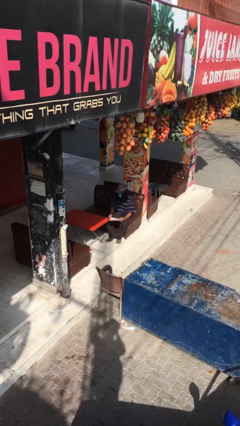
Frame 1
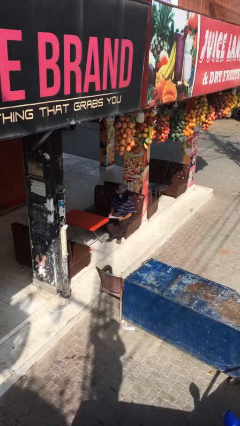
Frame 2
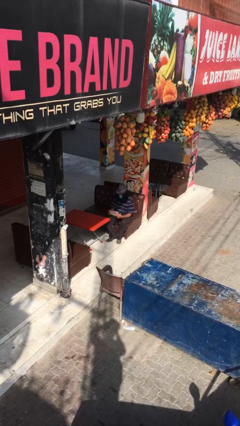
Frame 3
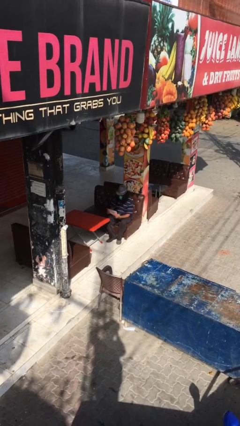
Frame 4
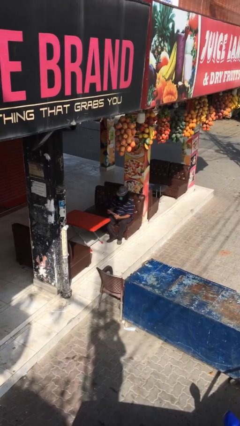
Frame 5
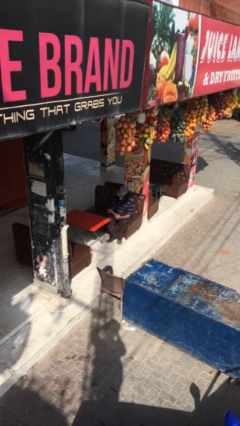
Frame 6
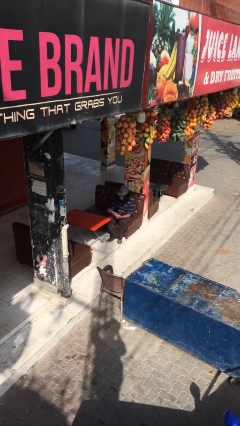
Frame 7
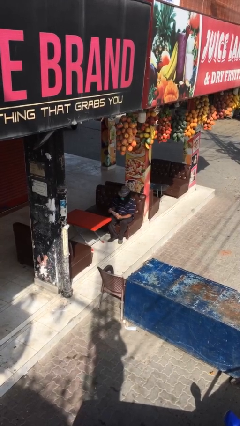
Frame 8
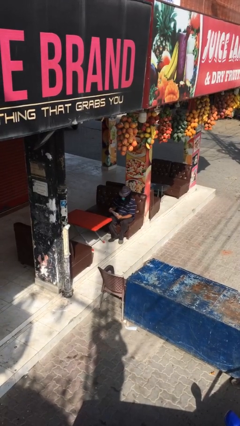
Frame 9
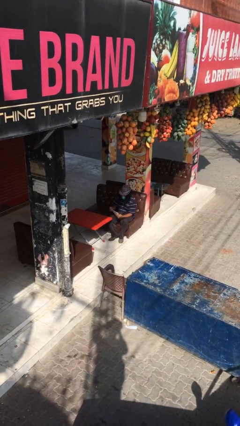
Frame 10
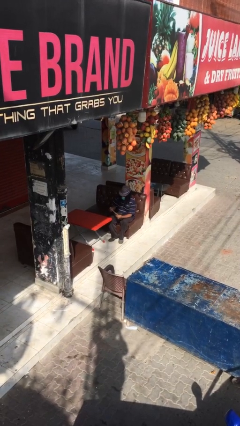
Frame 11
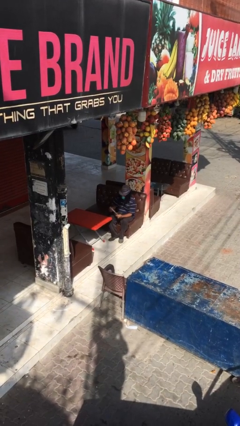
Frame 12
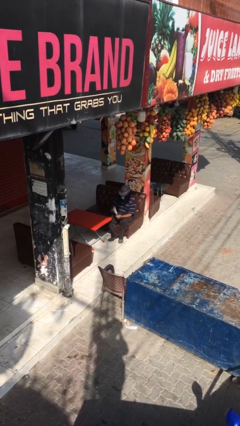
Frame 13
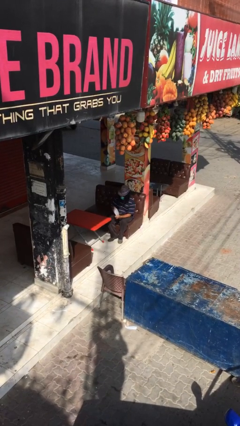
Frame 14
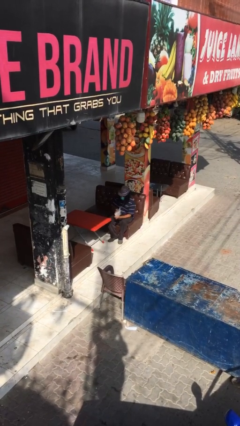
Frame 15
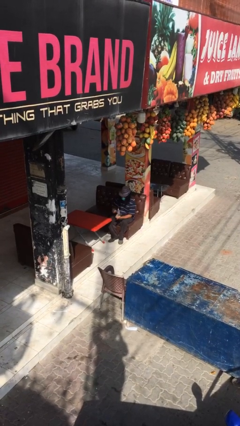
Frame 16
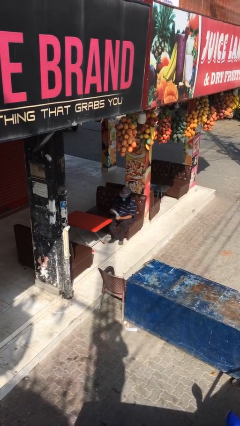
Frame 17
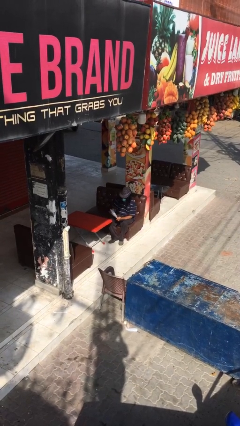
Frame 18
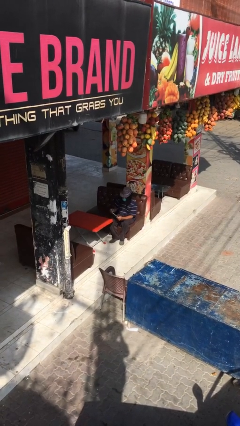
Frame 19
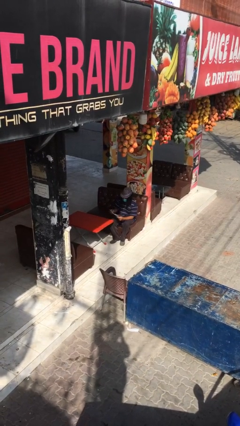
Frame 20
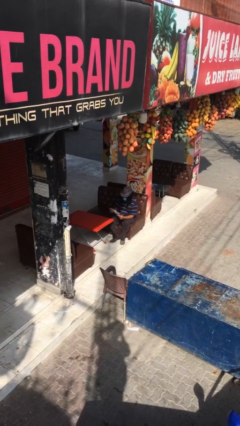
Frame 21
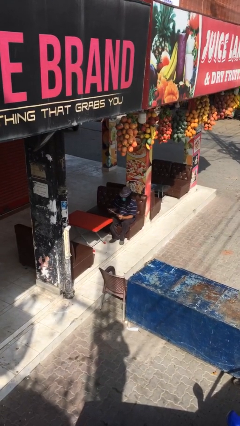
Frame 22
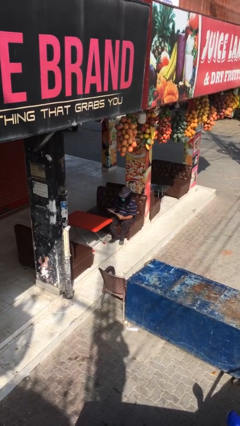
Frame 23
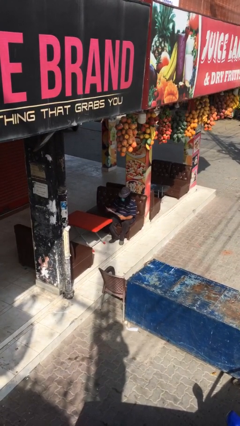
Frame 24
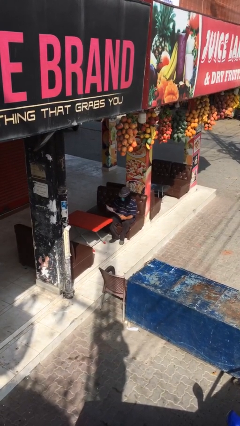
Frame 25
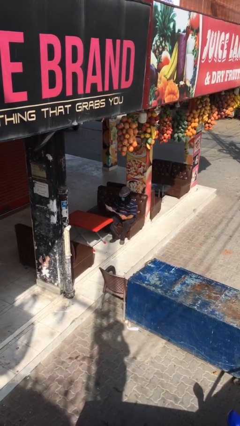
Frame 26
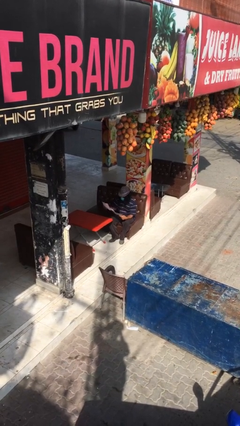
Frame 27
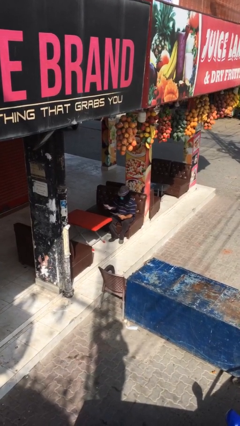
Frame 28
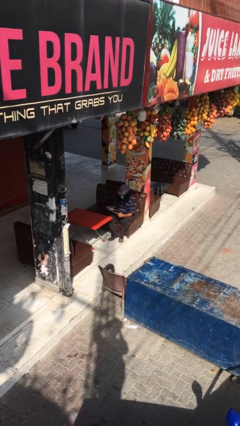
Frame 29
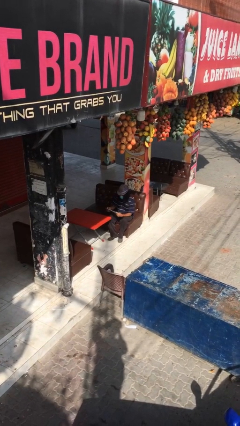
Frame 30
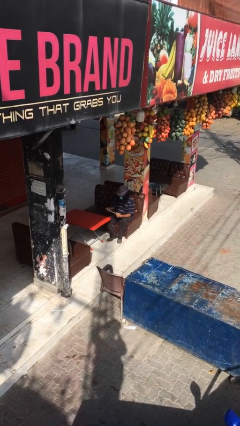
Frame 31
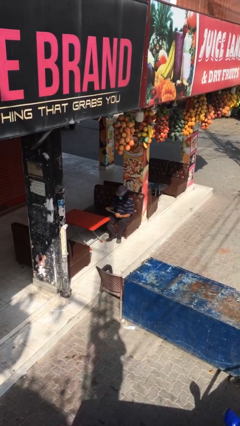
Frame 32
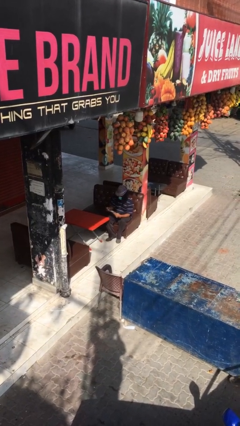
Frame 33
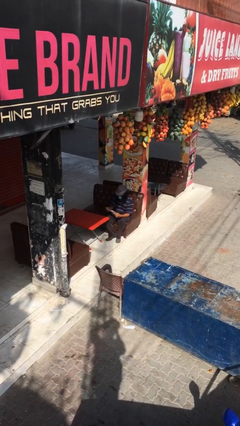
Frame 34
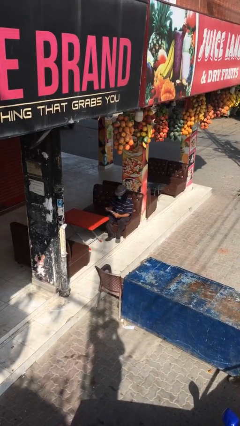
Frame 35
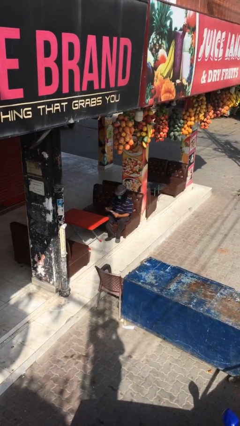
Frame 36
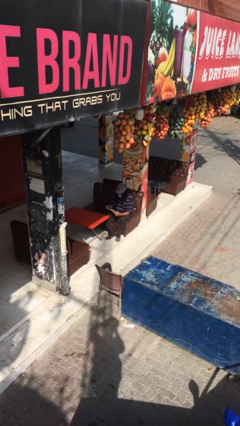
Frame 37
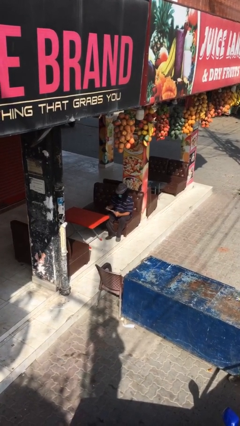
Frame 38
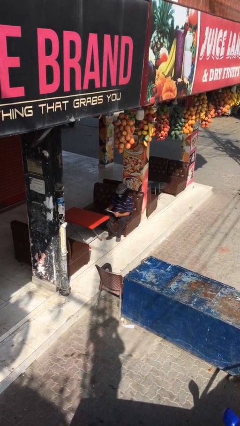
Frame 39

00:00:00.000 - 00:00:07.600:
person reads document

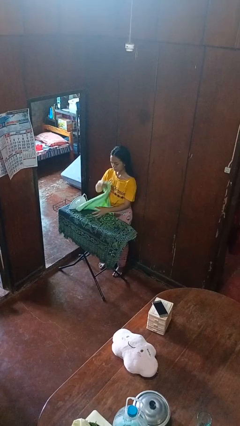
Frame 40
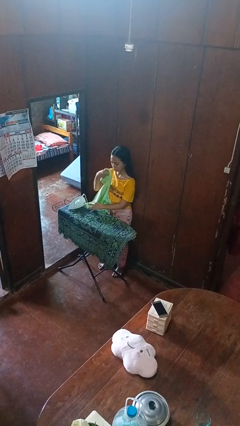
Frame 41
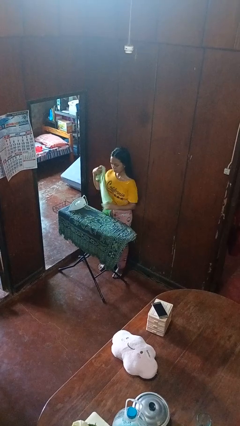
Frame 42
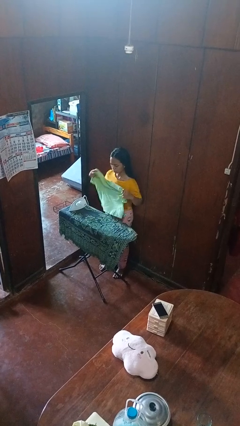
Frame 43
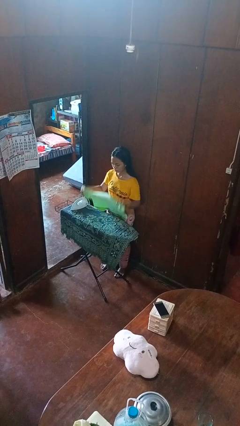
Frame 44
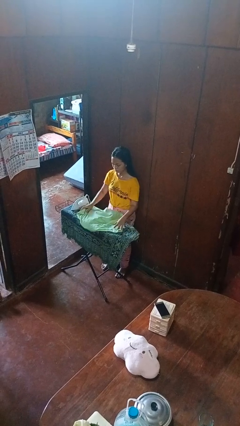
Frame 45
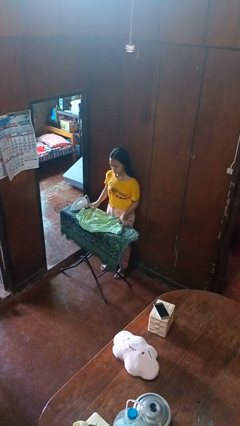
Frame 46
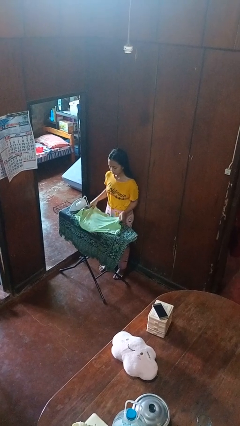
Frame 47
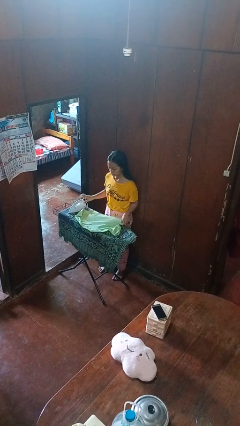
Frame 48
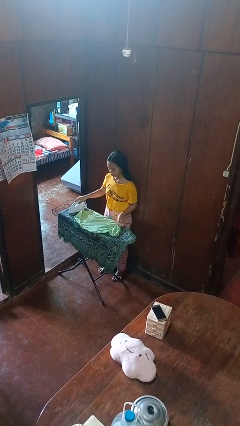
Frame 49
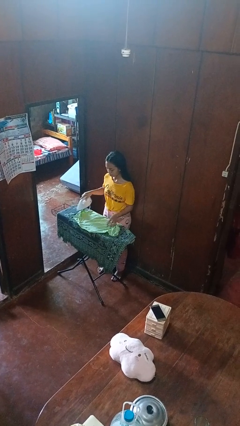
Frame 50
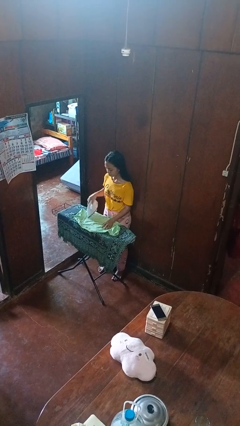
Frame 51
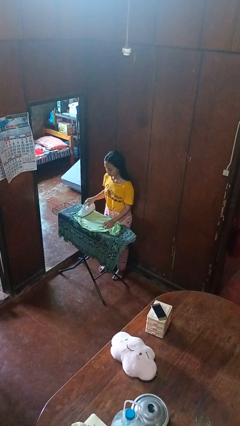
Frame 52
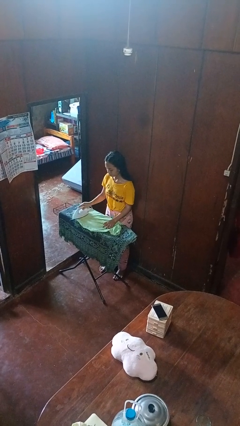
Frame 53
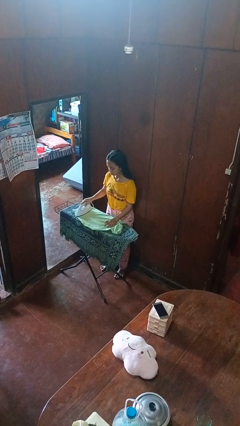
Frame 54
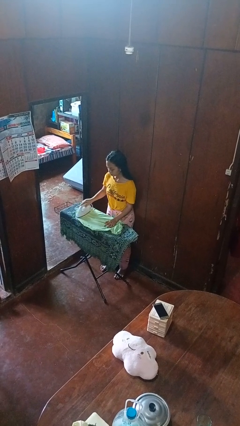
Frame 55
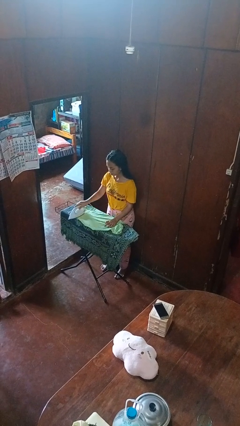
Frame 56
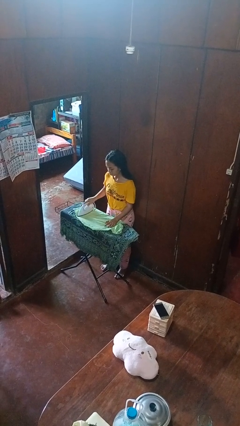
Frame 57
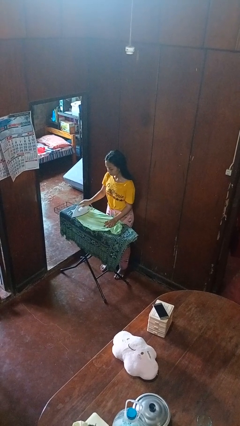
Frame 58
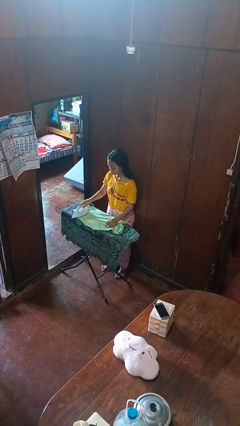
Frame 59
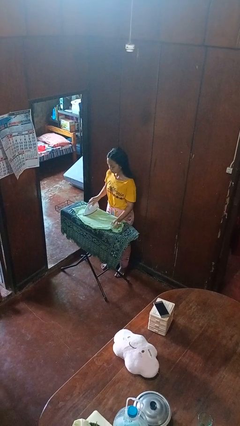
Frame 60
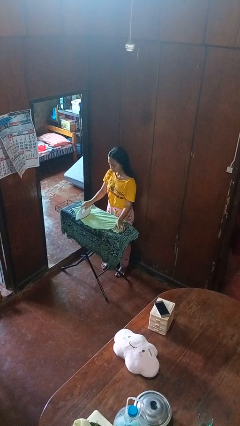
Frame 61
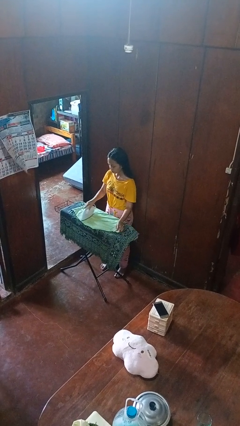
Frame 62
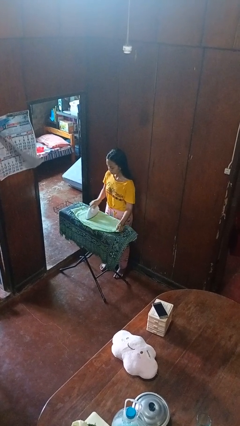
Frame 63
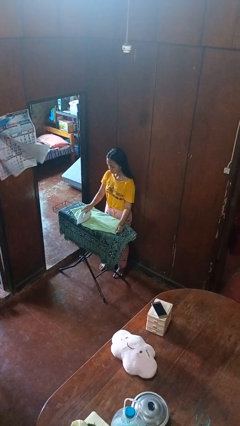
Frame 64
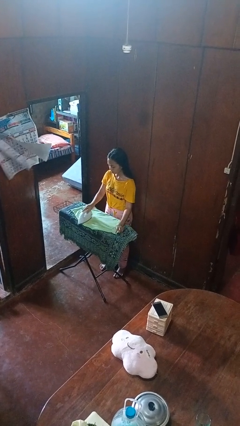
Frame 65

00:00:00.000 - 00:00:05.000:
person irons clothes

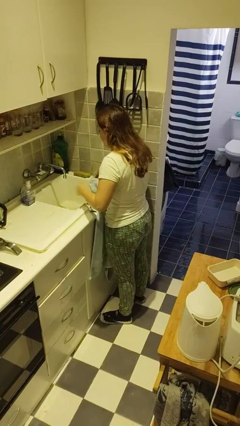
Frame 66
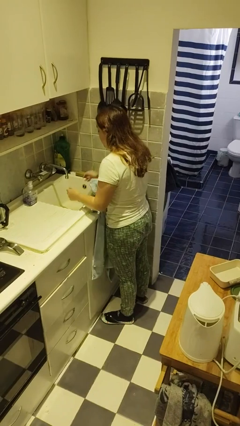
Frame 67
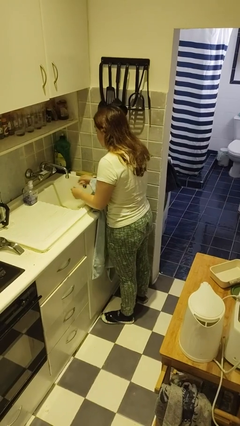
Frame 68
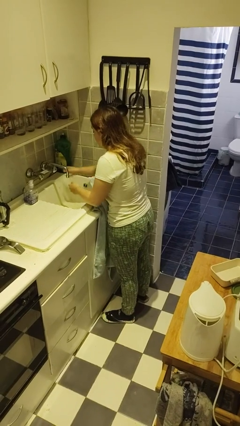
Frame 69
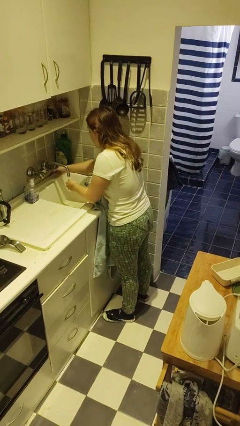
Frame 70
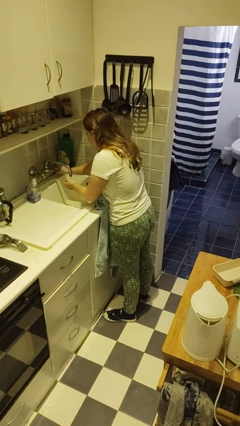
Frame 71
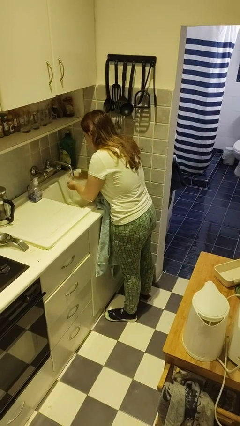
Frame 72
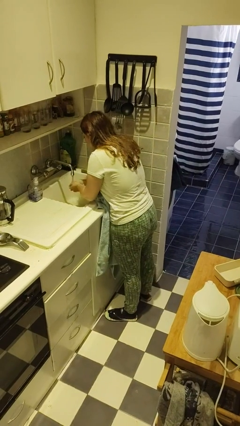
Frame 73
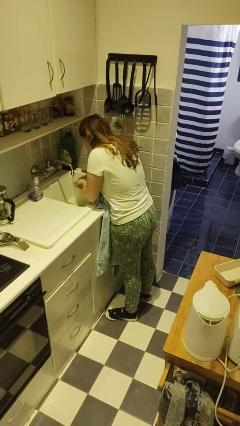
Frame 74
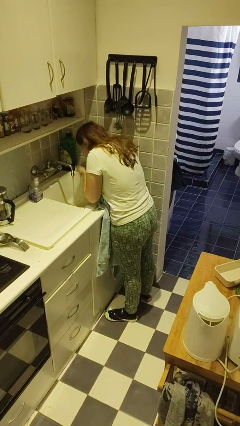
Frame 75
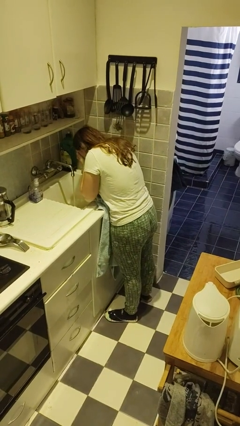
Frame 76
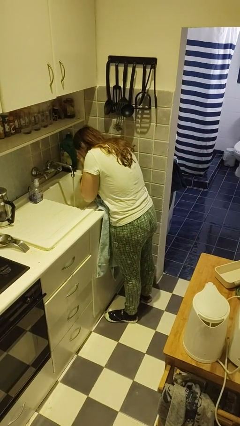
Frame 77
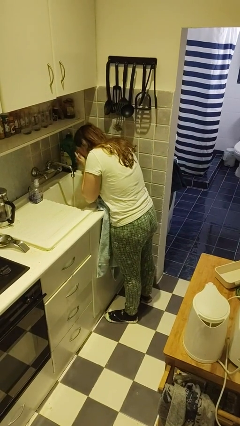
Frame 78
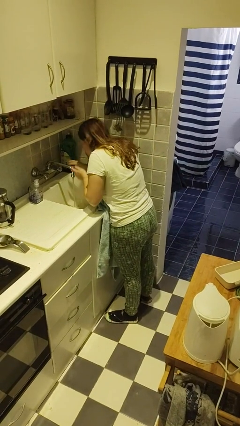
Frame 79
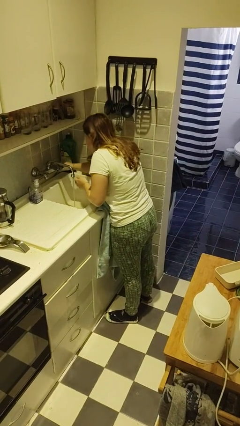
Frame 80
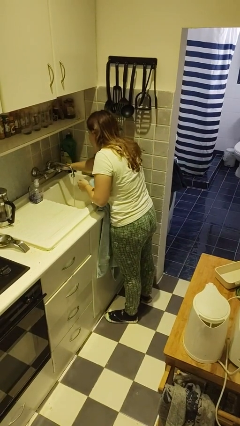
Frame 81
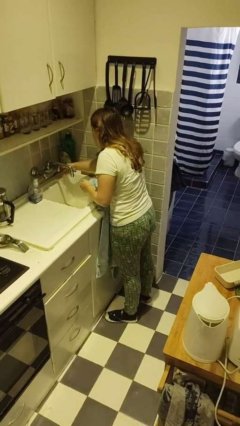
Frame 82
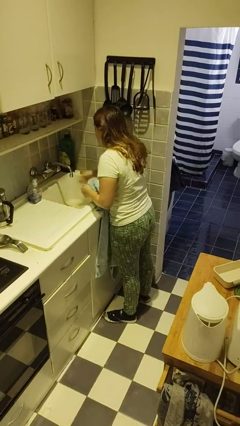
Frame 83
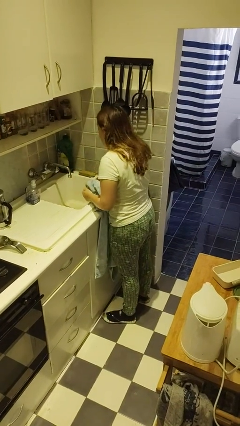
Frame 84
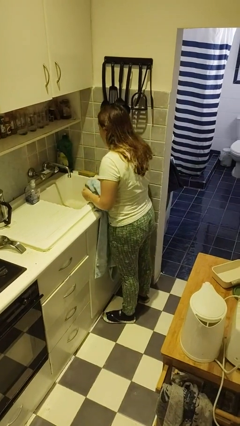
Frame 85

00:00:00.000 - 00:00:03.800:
person washes face

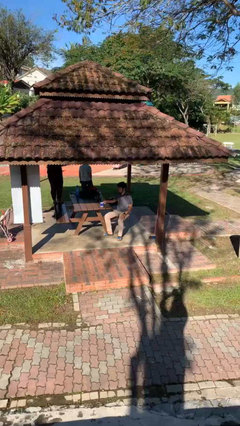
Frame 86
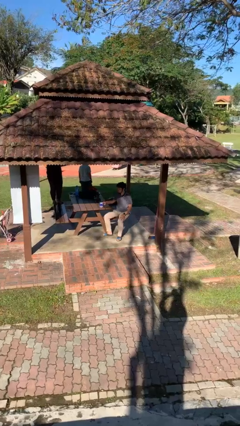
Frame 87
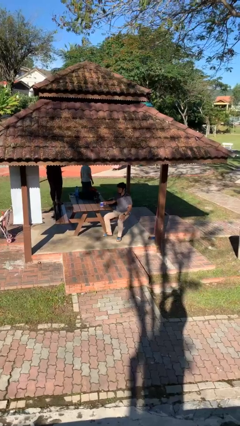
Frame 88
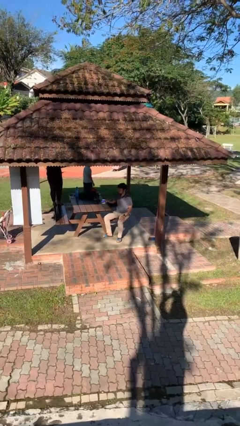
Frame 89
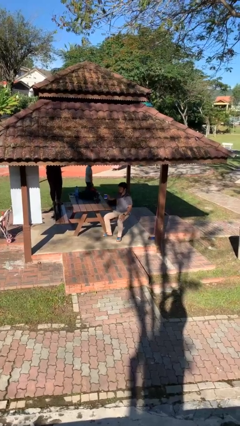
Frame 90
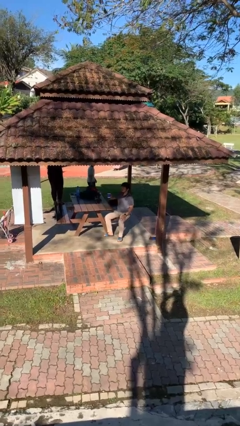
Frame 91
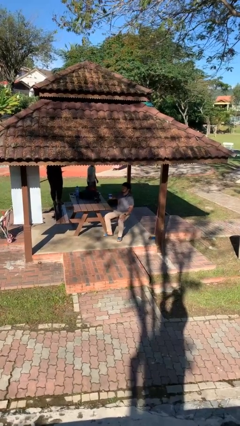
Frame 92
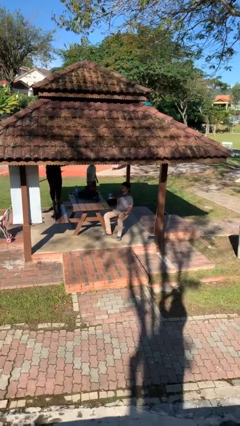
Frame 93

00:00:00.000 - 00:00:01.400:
person picks up object from table

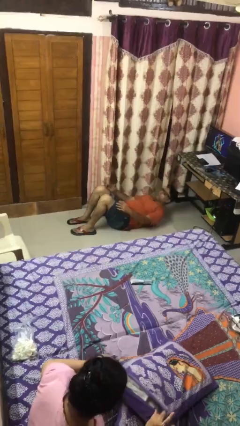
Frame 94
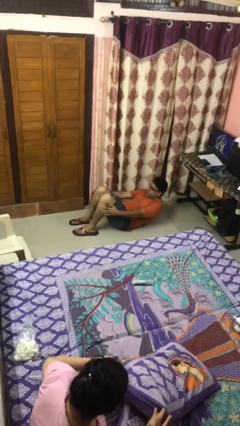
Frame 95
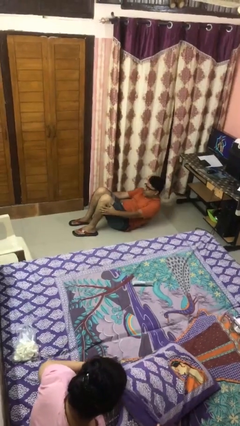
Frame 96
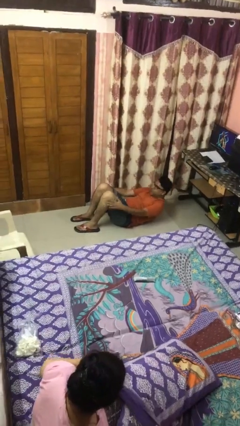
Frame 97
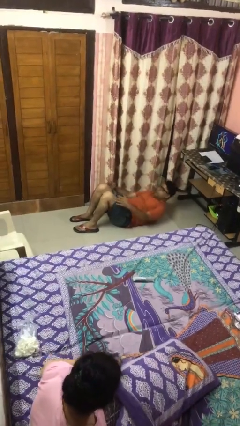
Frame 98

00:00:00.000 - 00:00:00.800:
person exercises with situp
